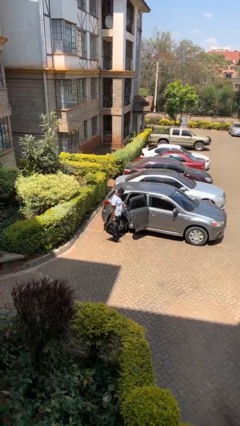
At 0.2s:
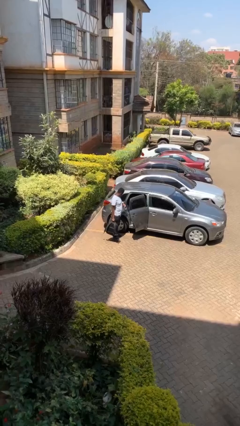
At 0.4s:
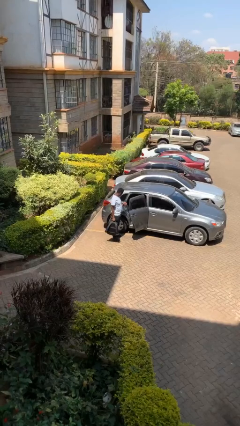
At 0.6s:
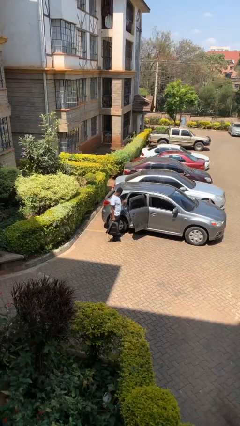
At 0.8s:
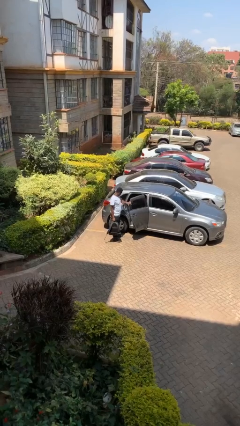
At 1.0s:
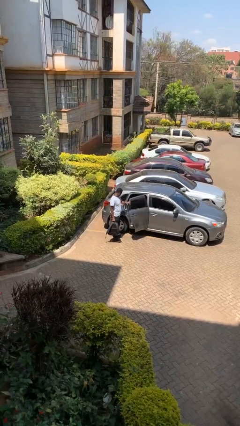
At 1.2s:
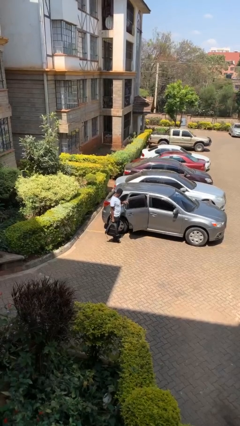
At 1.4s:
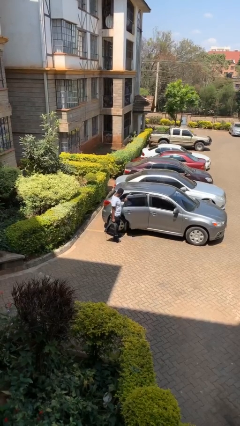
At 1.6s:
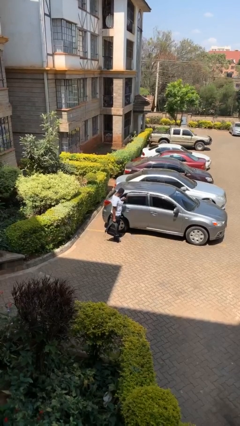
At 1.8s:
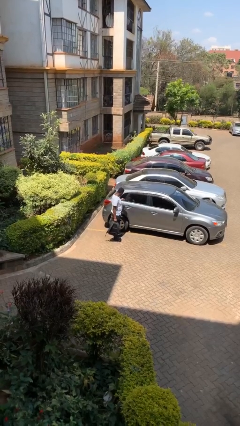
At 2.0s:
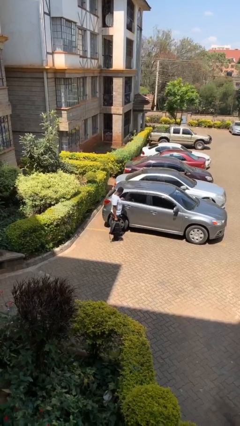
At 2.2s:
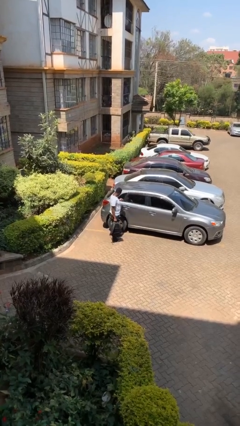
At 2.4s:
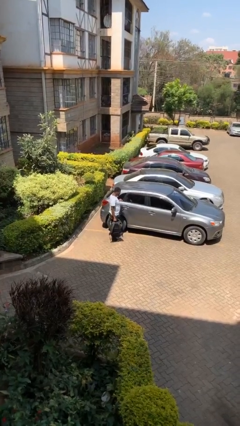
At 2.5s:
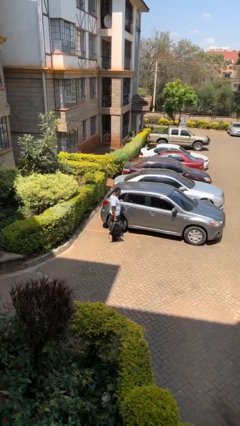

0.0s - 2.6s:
person closes car door

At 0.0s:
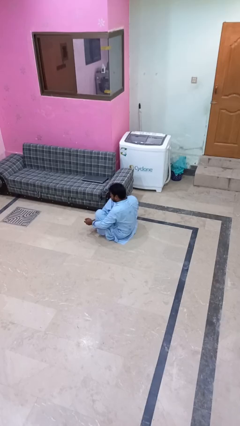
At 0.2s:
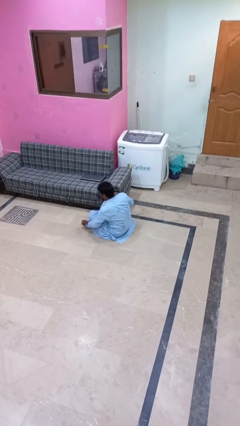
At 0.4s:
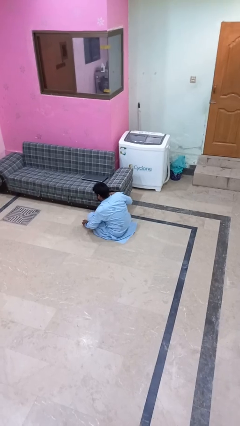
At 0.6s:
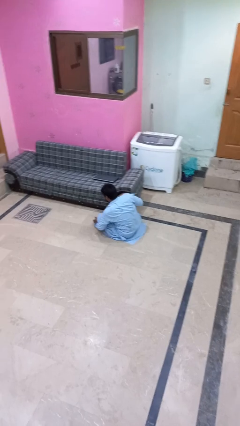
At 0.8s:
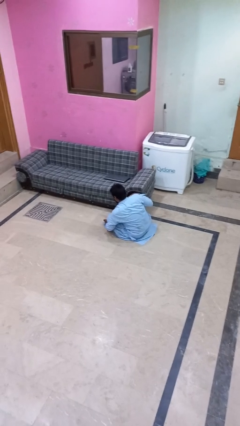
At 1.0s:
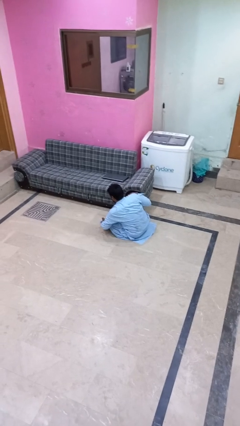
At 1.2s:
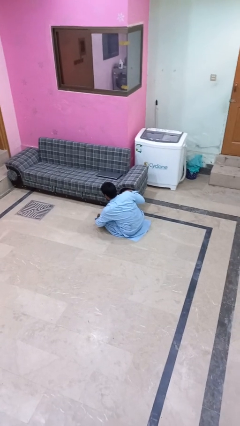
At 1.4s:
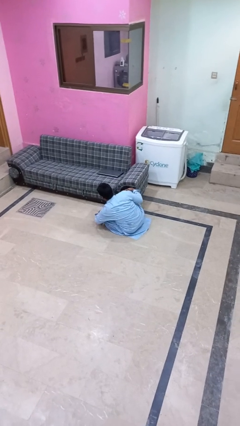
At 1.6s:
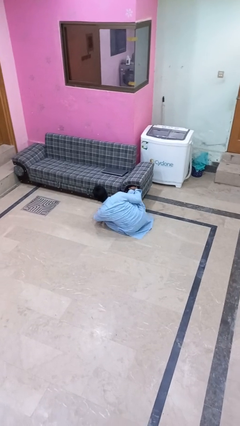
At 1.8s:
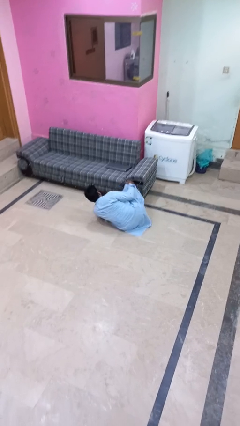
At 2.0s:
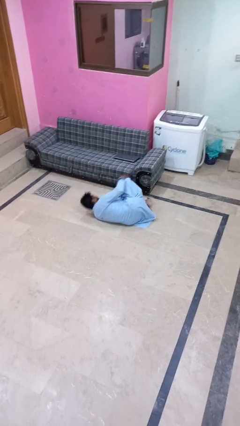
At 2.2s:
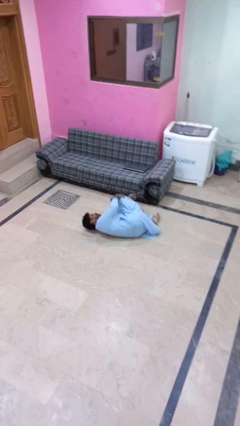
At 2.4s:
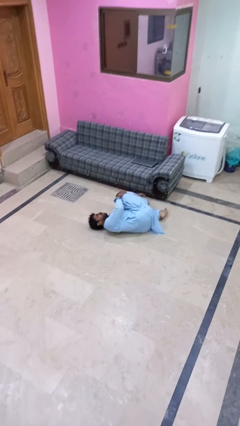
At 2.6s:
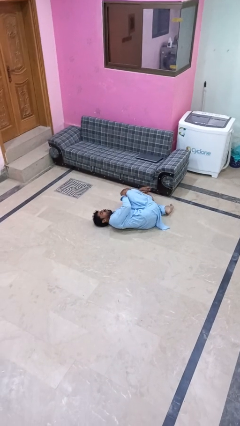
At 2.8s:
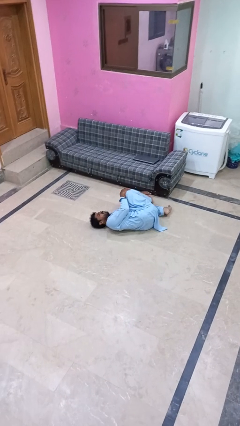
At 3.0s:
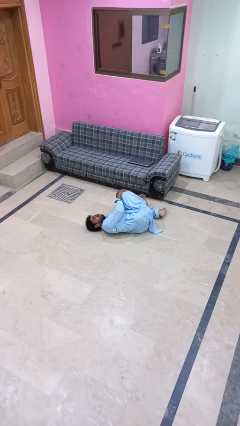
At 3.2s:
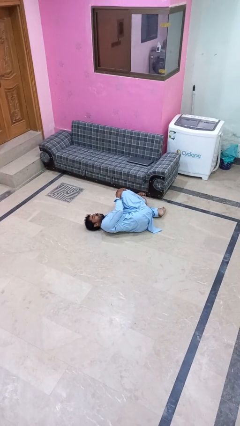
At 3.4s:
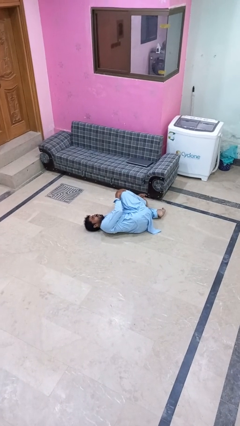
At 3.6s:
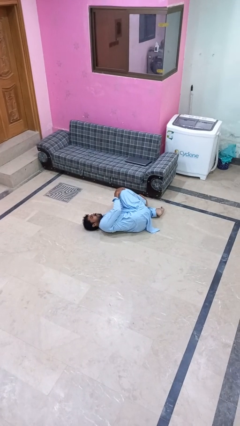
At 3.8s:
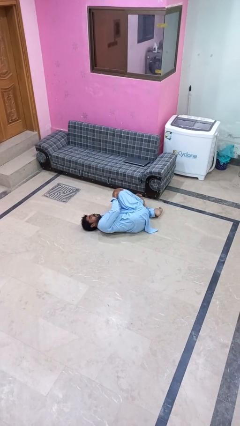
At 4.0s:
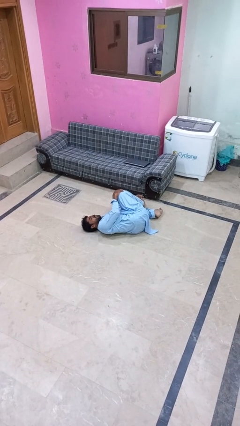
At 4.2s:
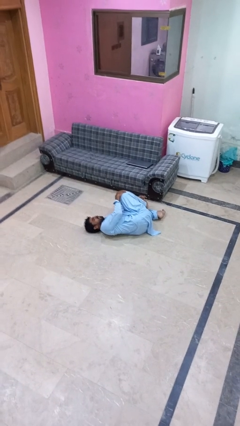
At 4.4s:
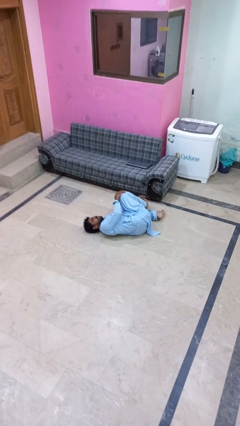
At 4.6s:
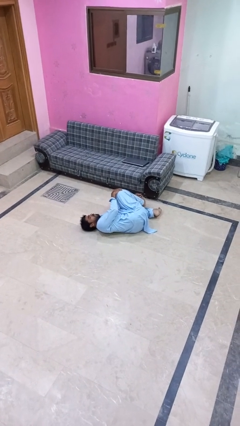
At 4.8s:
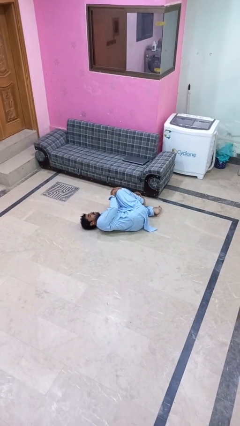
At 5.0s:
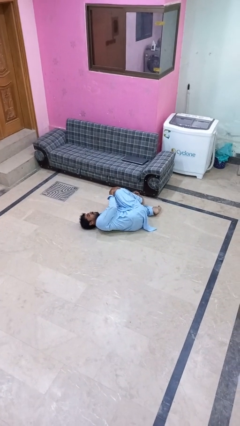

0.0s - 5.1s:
person lies down on floor

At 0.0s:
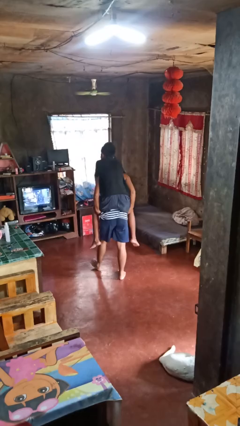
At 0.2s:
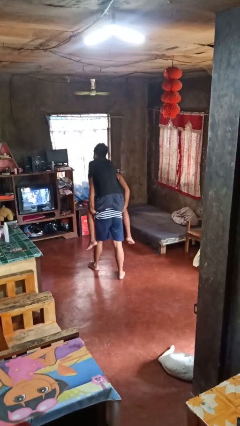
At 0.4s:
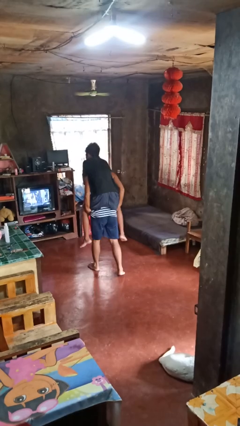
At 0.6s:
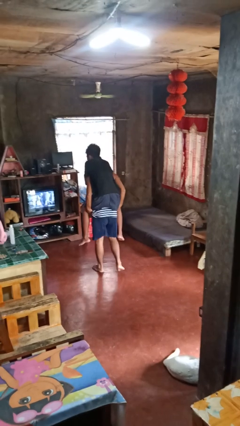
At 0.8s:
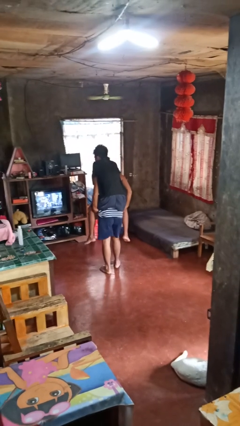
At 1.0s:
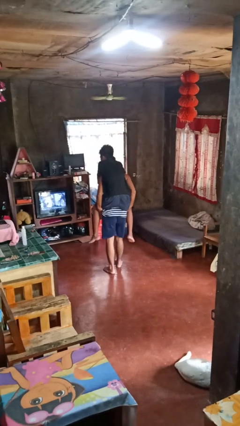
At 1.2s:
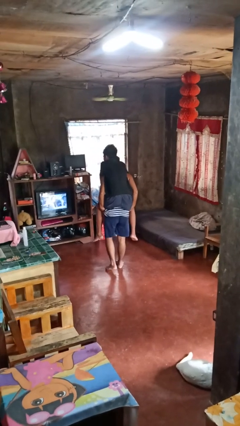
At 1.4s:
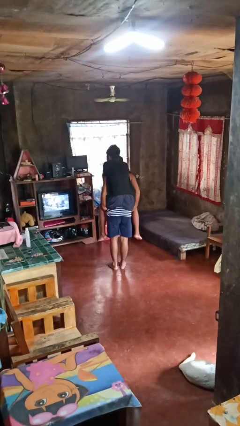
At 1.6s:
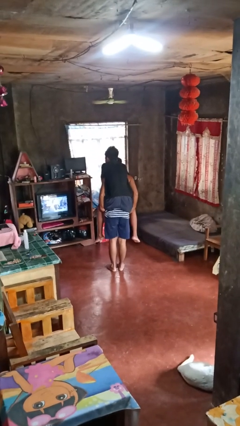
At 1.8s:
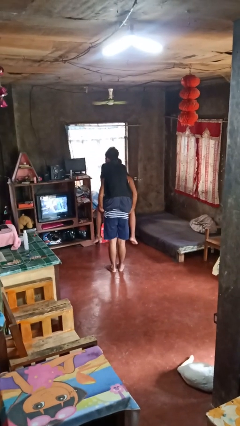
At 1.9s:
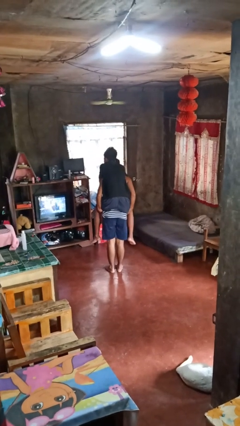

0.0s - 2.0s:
person carries person on back

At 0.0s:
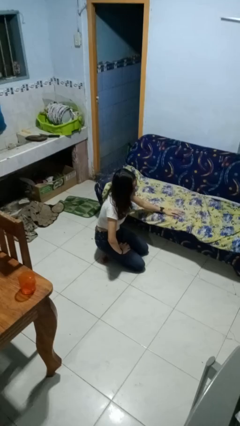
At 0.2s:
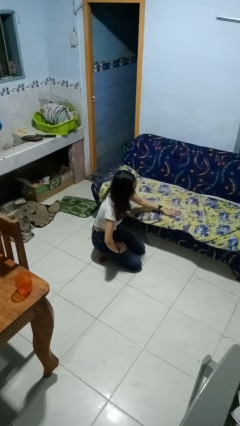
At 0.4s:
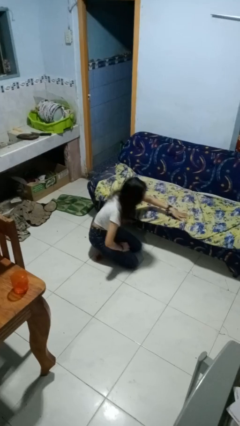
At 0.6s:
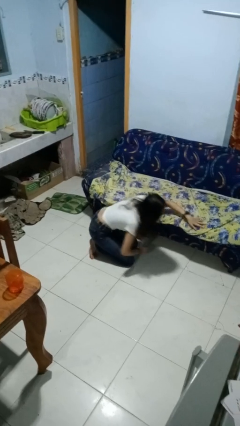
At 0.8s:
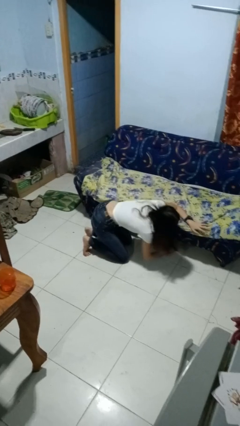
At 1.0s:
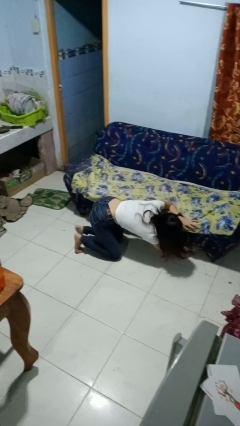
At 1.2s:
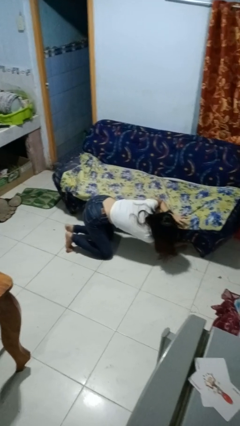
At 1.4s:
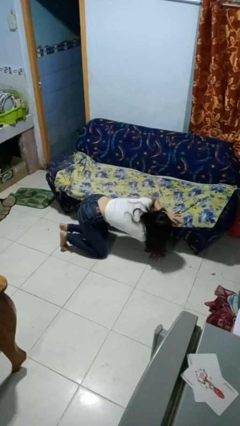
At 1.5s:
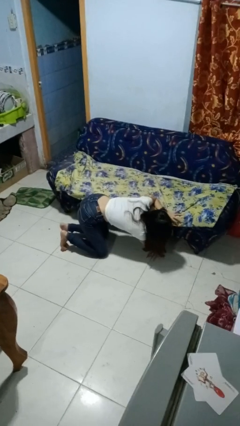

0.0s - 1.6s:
person searches under couch

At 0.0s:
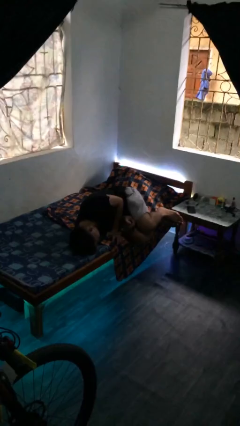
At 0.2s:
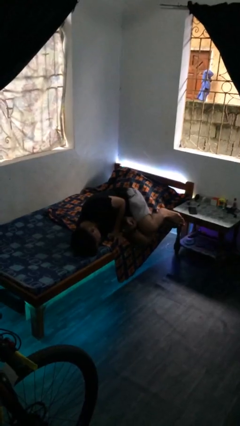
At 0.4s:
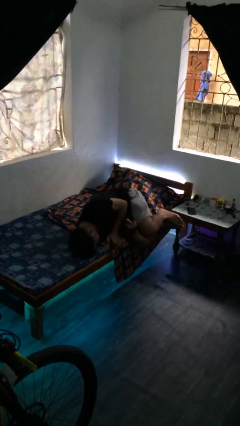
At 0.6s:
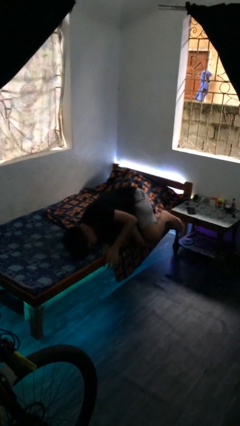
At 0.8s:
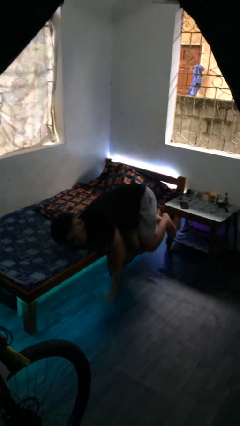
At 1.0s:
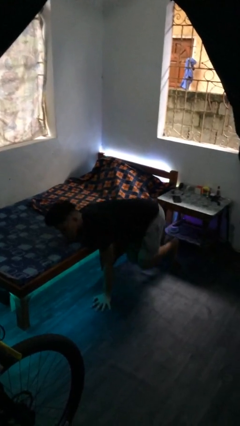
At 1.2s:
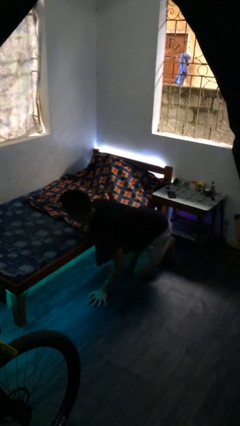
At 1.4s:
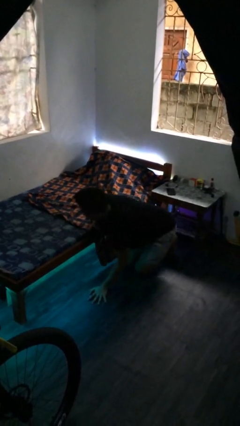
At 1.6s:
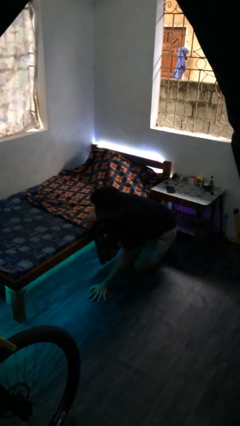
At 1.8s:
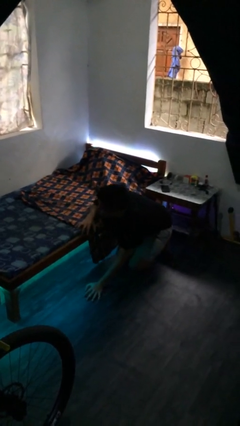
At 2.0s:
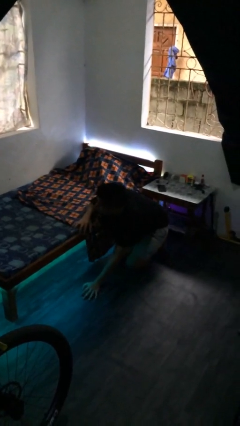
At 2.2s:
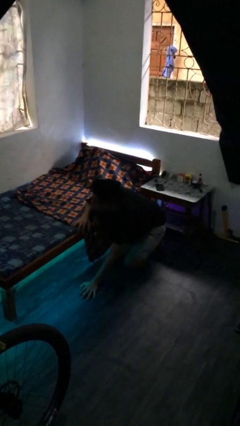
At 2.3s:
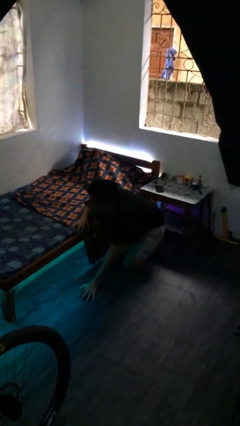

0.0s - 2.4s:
person falls from bed

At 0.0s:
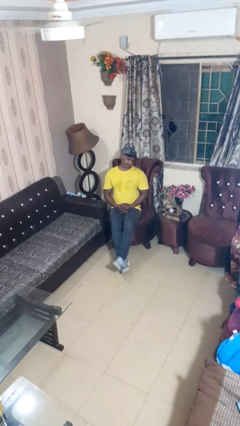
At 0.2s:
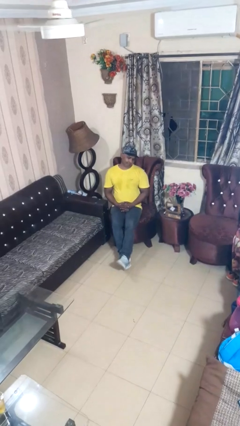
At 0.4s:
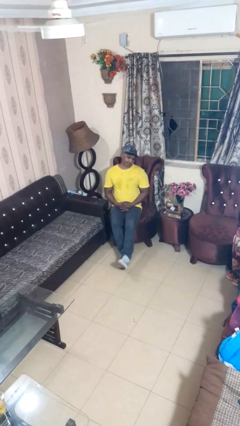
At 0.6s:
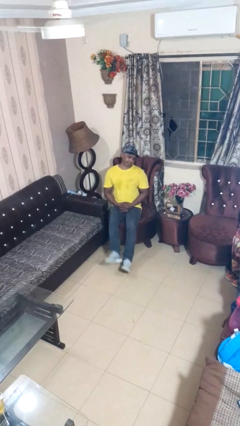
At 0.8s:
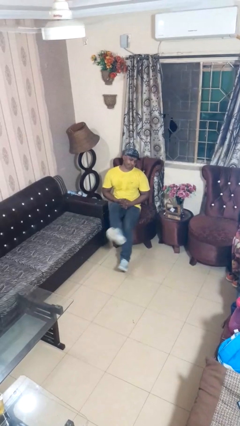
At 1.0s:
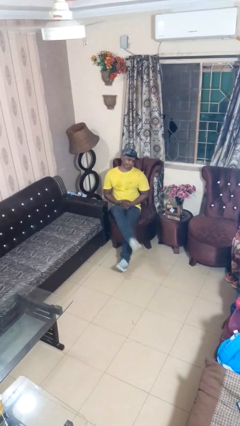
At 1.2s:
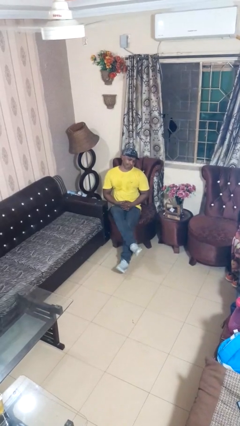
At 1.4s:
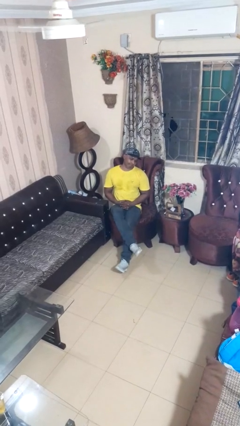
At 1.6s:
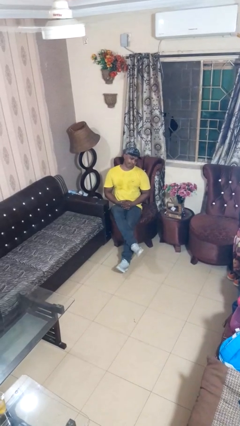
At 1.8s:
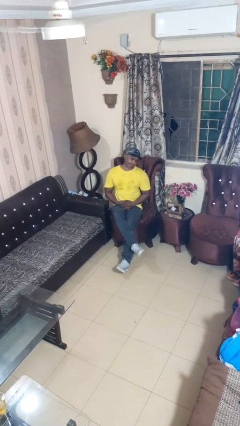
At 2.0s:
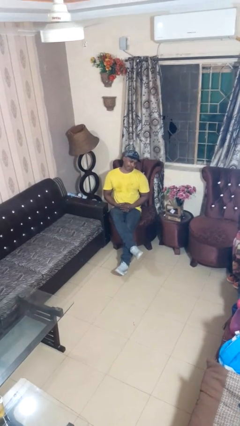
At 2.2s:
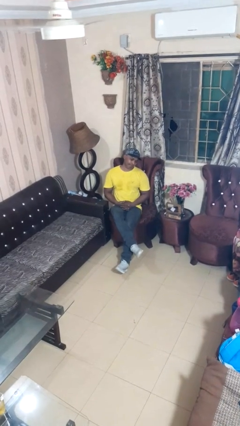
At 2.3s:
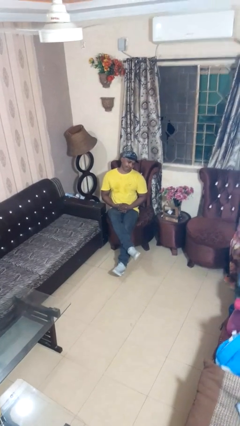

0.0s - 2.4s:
person crosses legs

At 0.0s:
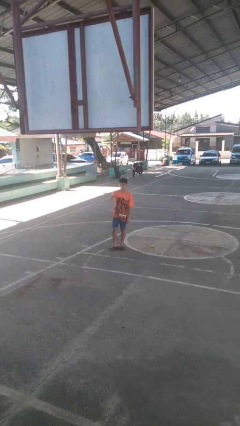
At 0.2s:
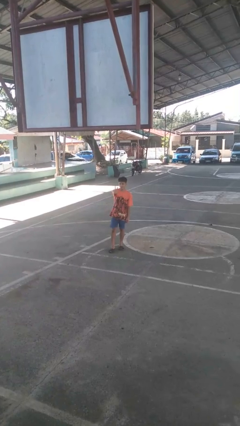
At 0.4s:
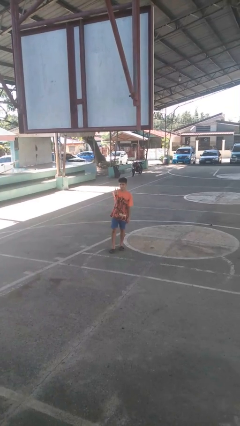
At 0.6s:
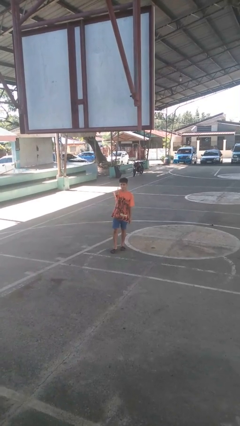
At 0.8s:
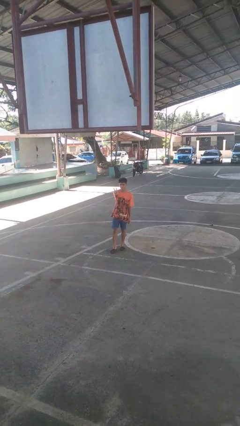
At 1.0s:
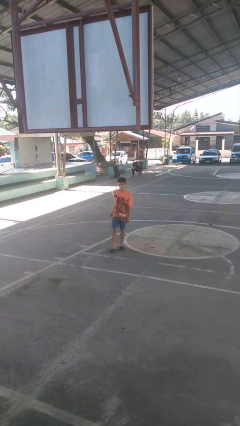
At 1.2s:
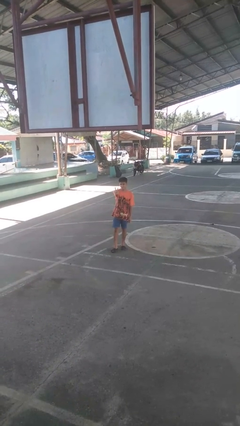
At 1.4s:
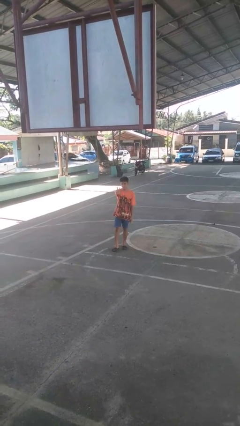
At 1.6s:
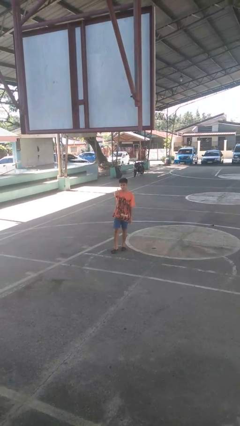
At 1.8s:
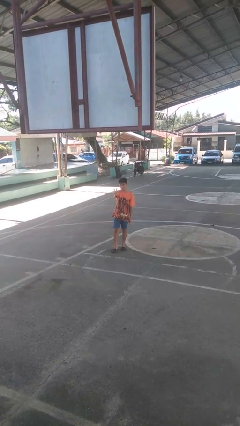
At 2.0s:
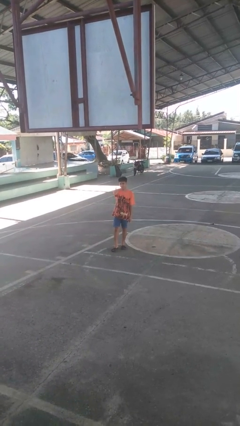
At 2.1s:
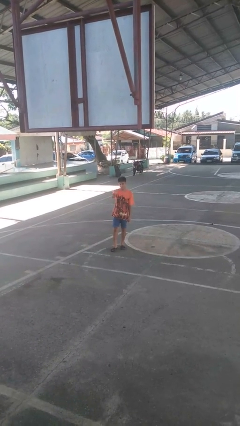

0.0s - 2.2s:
person gestures peace
